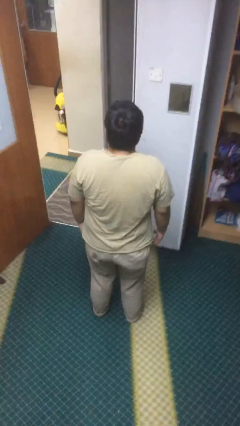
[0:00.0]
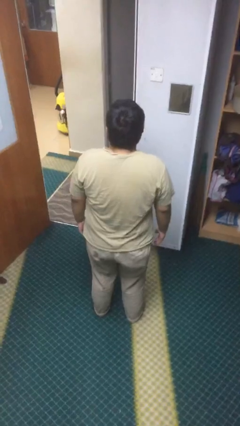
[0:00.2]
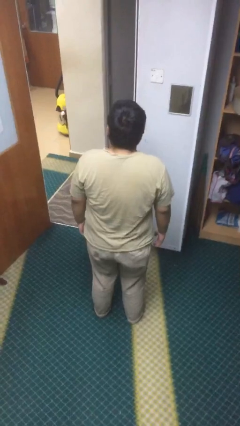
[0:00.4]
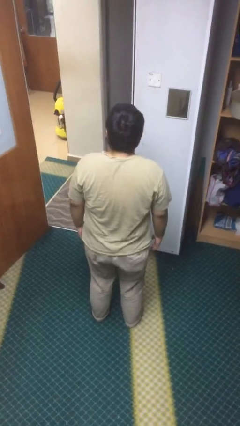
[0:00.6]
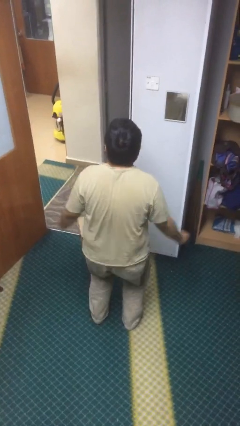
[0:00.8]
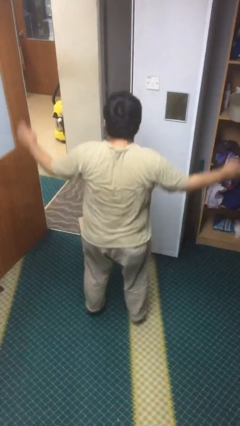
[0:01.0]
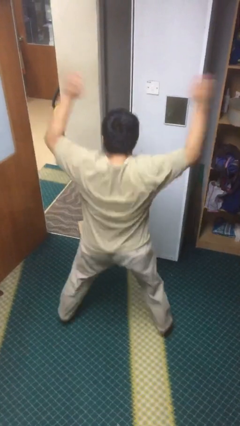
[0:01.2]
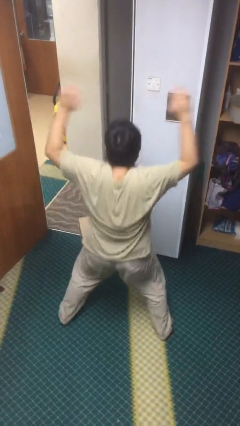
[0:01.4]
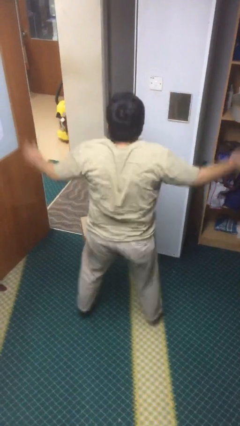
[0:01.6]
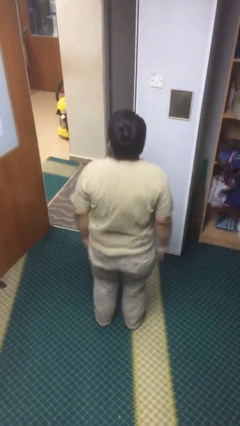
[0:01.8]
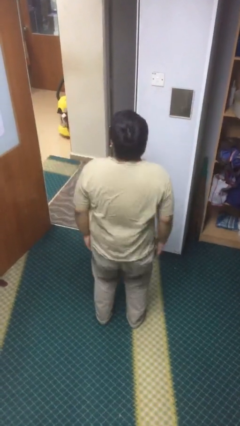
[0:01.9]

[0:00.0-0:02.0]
person exercises with jumping jacks

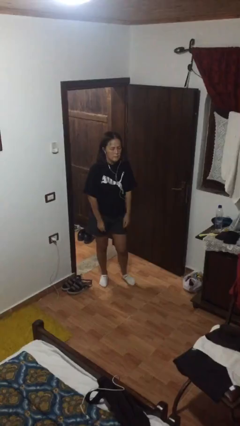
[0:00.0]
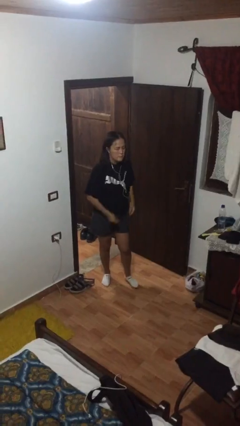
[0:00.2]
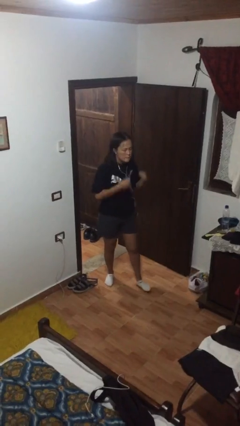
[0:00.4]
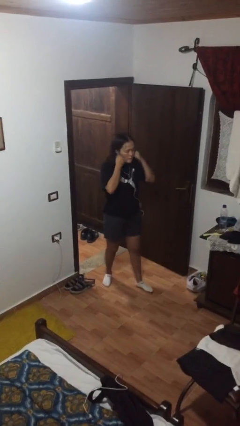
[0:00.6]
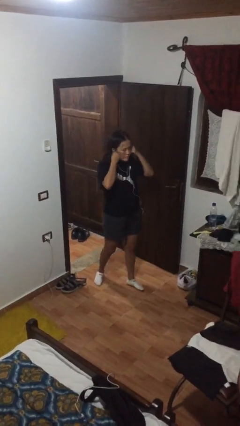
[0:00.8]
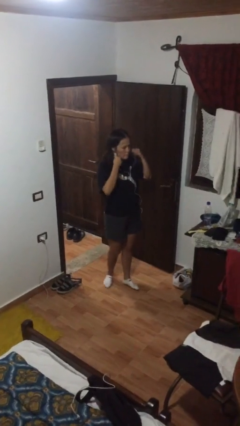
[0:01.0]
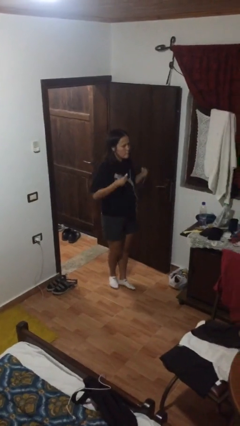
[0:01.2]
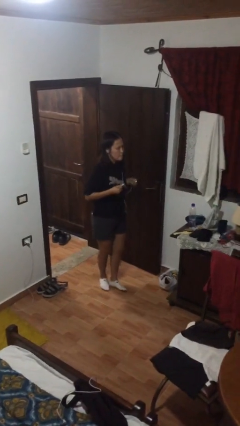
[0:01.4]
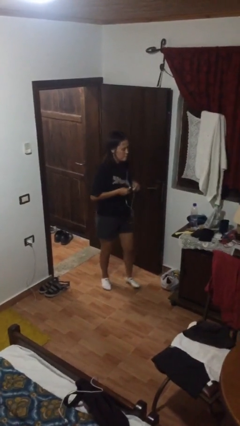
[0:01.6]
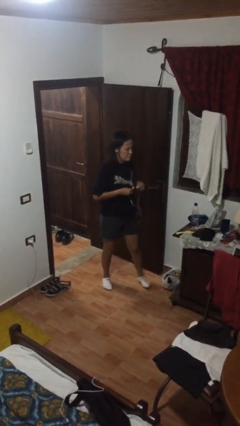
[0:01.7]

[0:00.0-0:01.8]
person takes off headphones

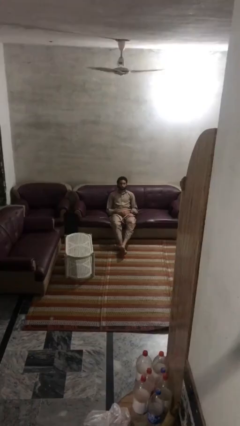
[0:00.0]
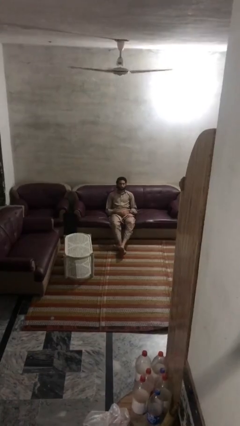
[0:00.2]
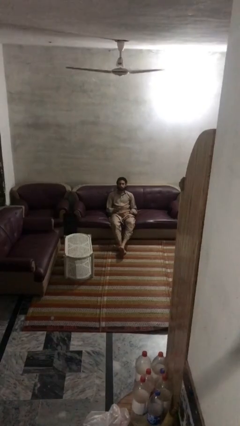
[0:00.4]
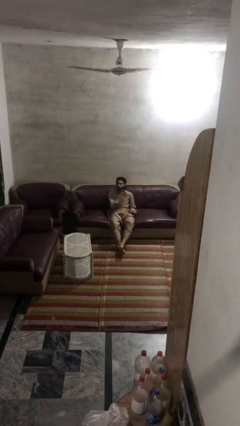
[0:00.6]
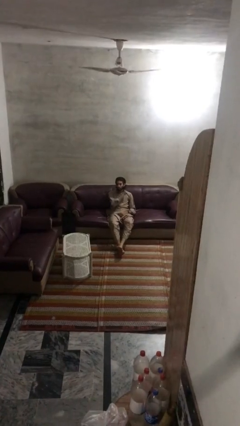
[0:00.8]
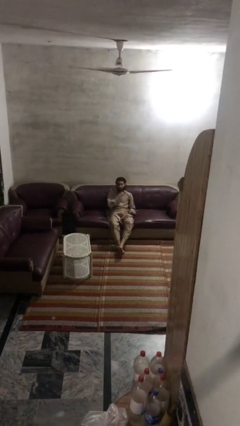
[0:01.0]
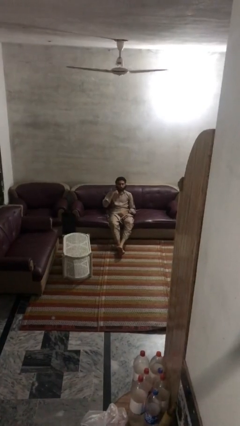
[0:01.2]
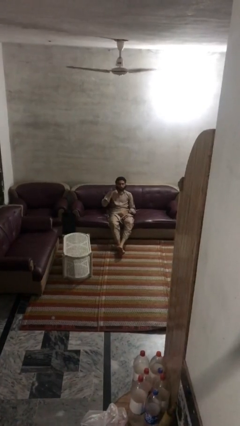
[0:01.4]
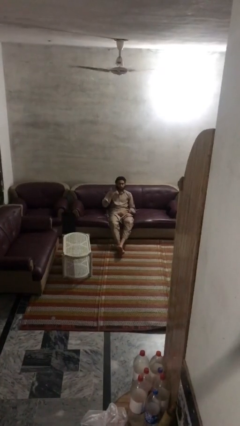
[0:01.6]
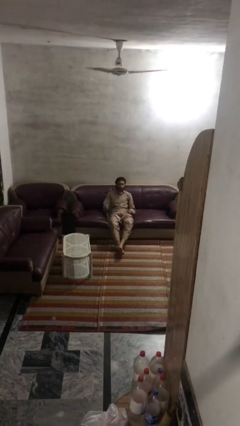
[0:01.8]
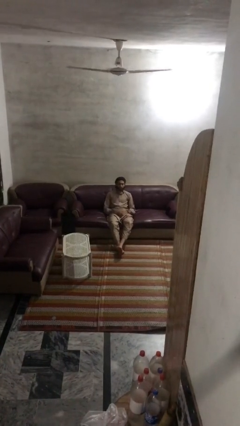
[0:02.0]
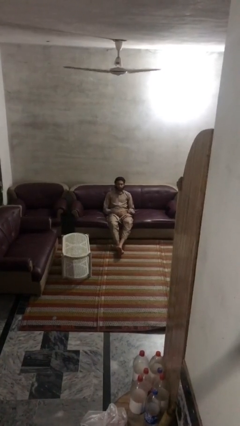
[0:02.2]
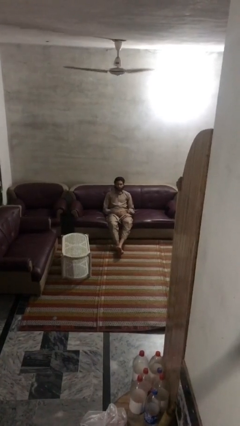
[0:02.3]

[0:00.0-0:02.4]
person gestures cut

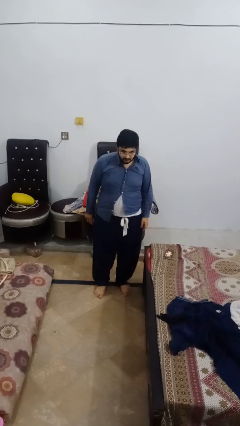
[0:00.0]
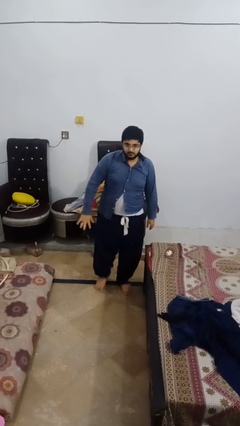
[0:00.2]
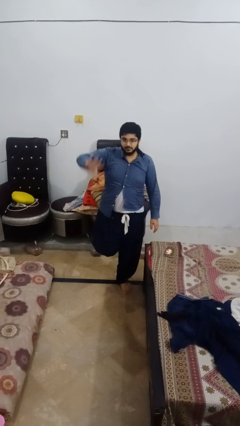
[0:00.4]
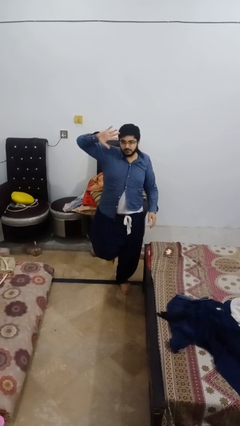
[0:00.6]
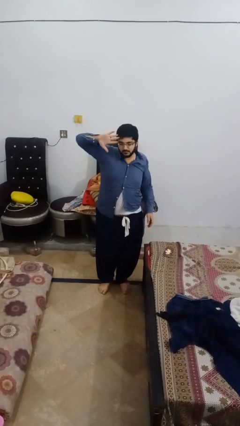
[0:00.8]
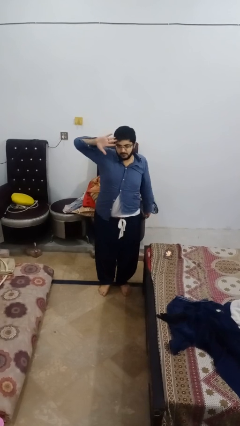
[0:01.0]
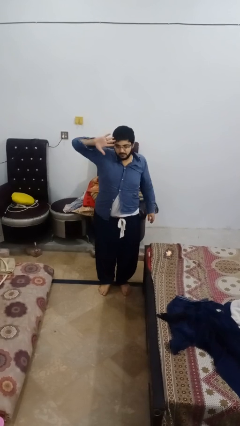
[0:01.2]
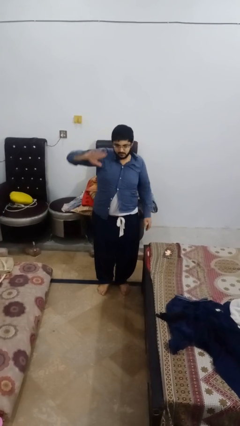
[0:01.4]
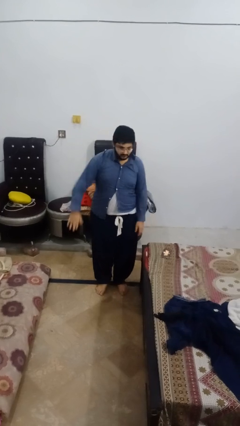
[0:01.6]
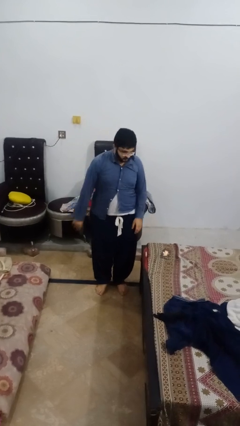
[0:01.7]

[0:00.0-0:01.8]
person salutes

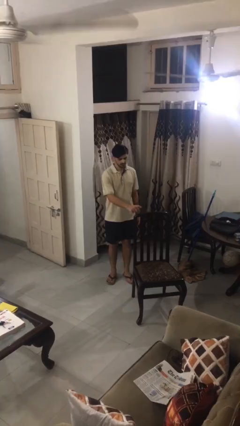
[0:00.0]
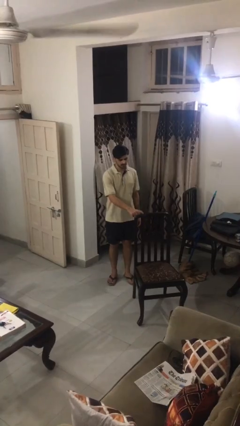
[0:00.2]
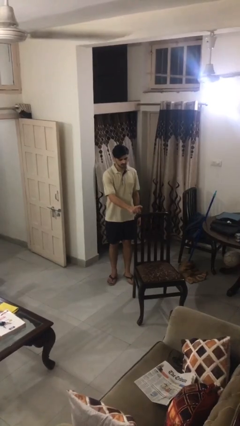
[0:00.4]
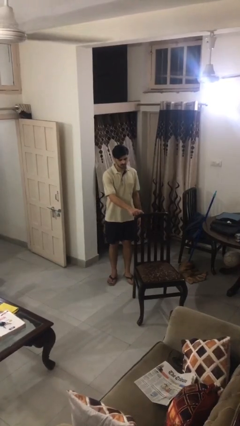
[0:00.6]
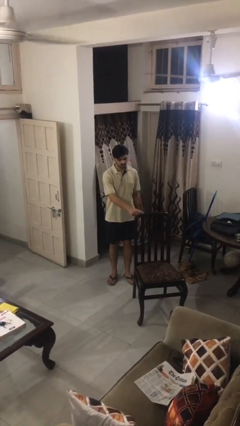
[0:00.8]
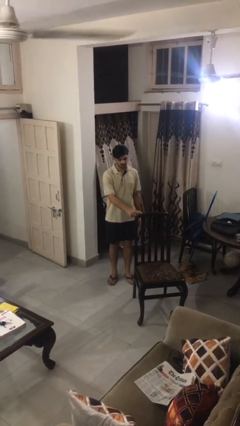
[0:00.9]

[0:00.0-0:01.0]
person taps object with finger

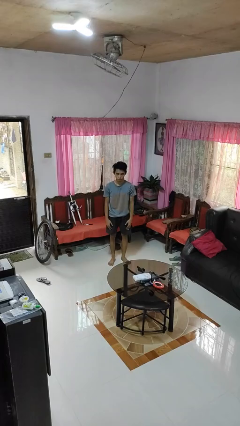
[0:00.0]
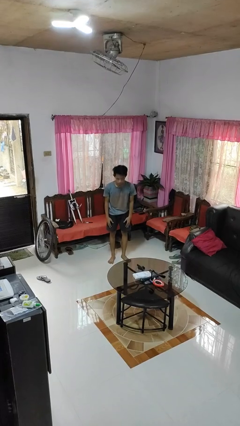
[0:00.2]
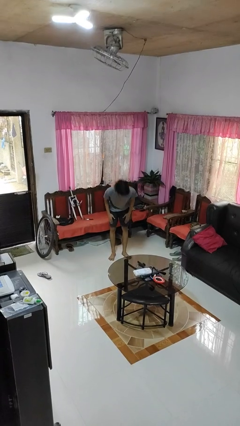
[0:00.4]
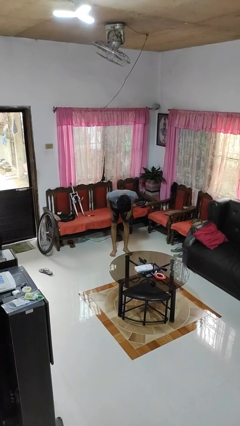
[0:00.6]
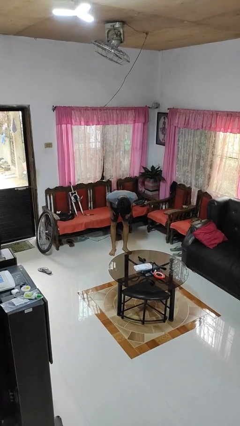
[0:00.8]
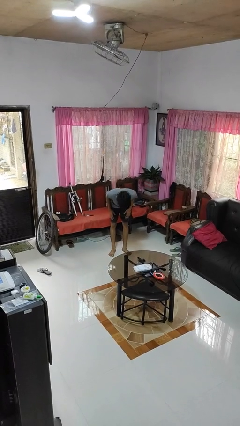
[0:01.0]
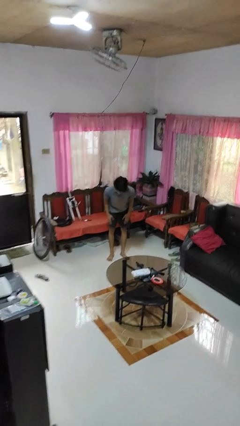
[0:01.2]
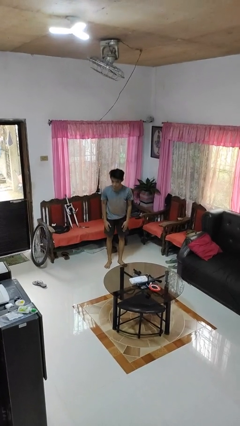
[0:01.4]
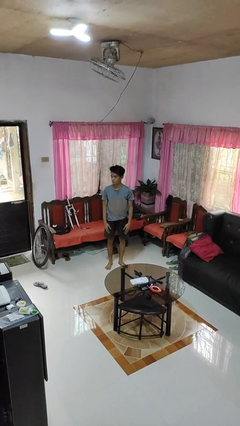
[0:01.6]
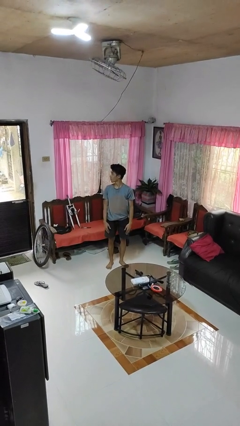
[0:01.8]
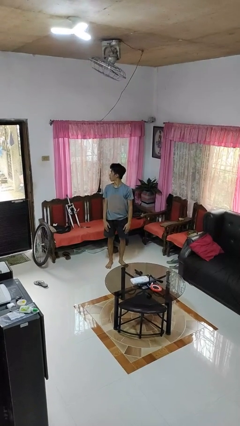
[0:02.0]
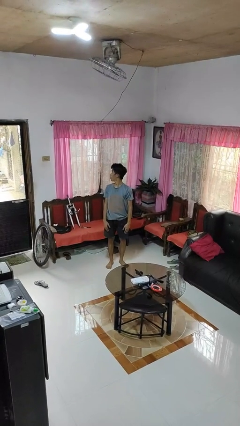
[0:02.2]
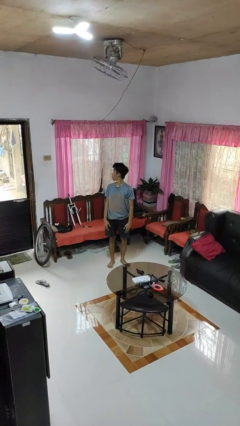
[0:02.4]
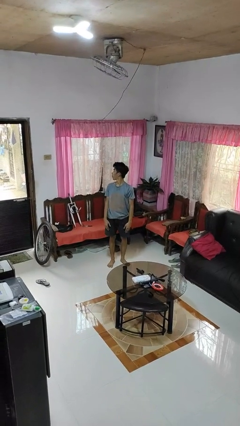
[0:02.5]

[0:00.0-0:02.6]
person bows

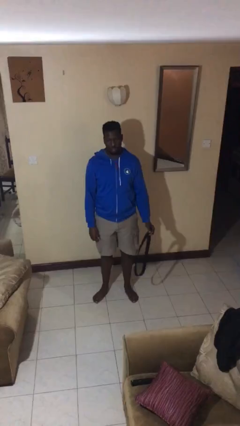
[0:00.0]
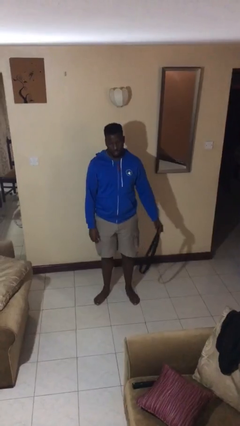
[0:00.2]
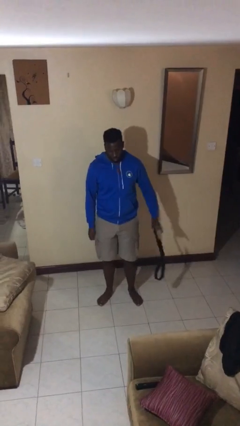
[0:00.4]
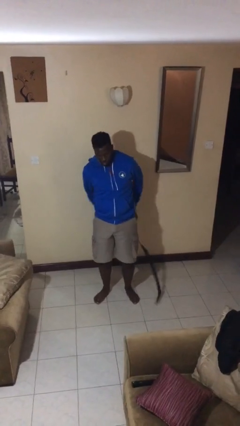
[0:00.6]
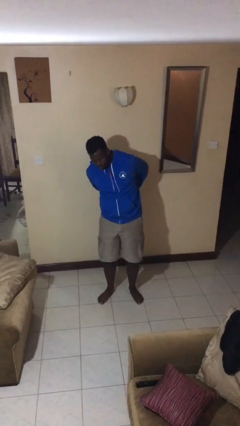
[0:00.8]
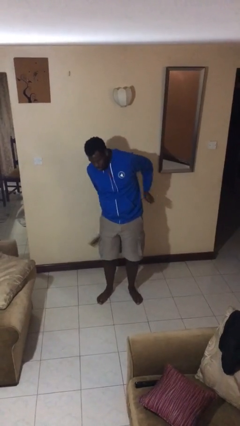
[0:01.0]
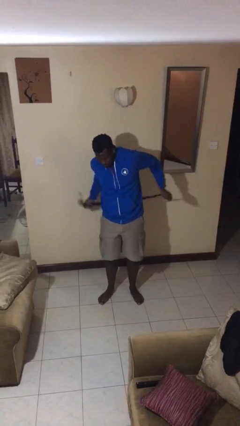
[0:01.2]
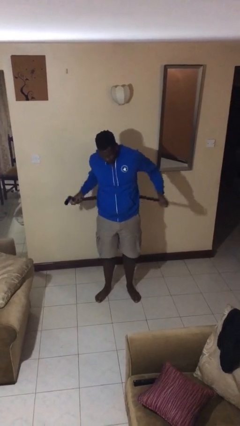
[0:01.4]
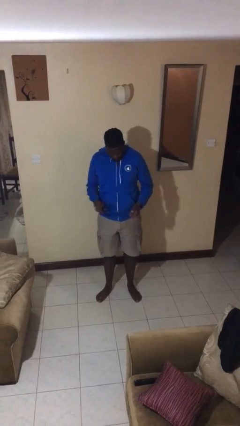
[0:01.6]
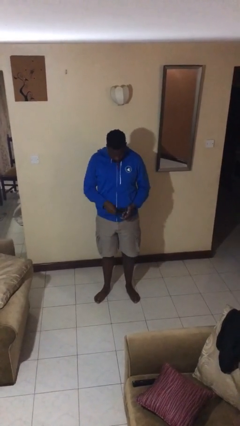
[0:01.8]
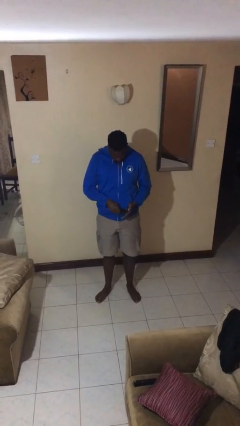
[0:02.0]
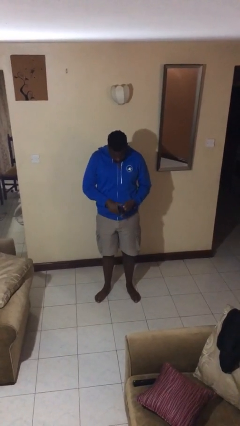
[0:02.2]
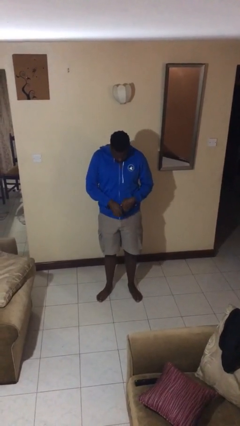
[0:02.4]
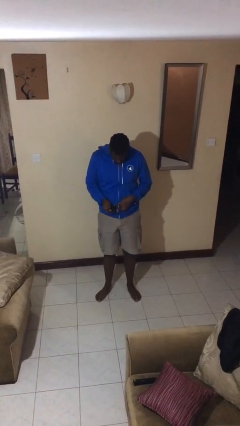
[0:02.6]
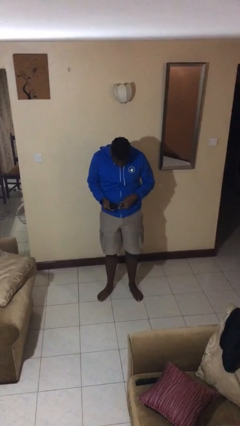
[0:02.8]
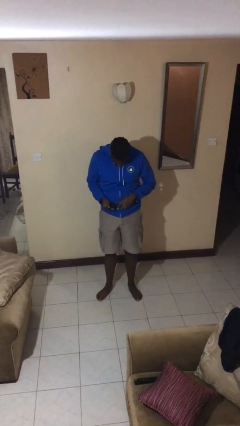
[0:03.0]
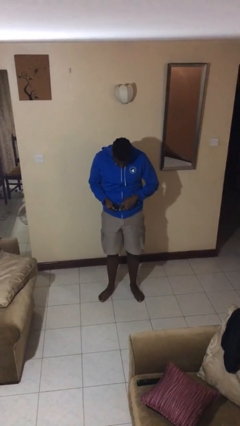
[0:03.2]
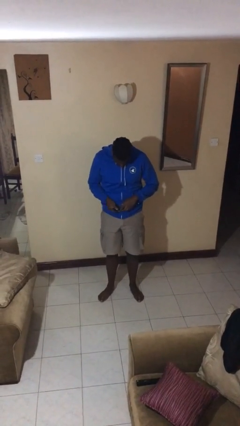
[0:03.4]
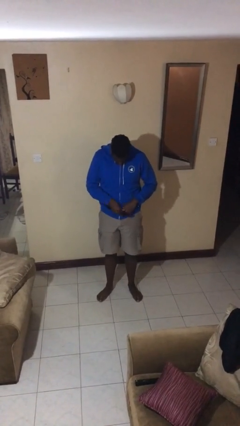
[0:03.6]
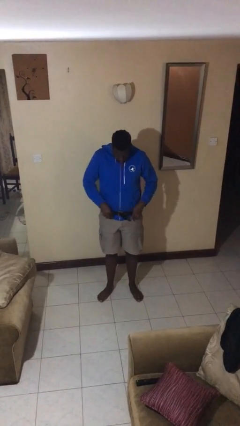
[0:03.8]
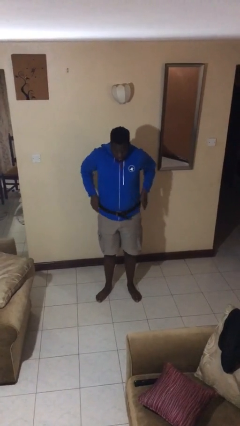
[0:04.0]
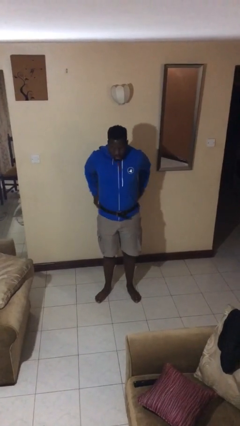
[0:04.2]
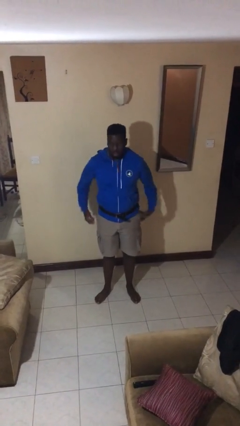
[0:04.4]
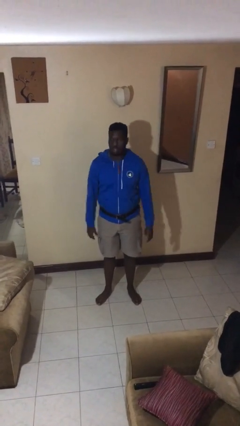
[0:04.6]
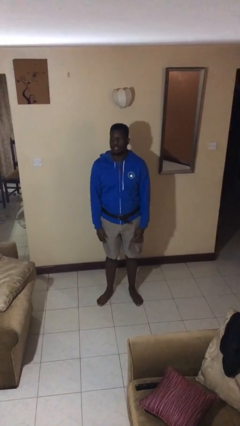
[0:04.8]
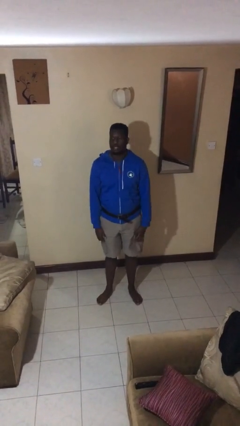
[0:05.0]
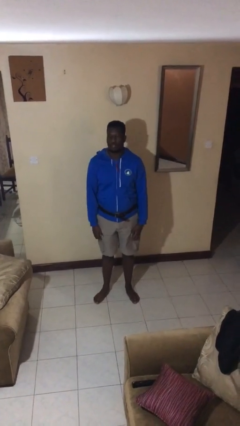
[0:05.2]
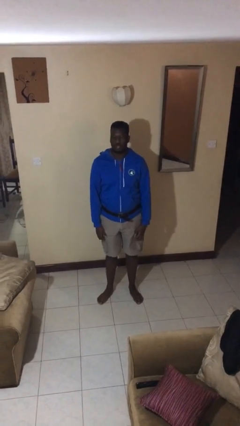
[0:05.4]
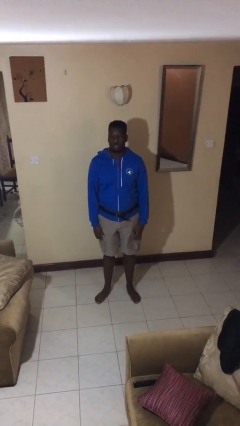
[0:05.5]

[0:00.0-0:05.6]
person puts on belt
